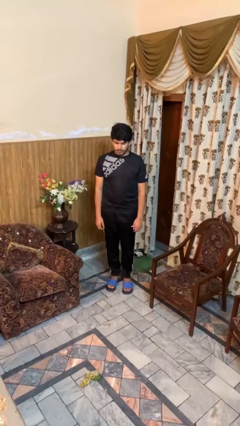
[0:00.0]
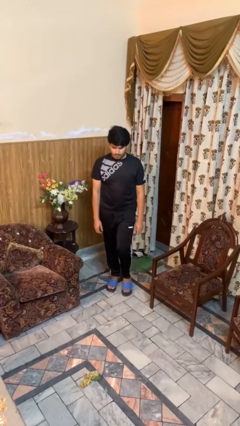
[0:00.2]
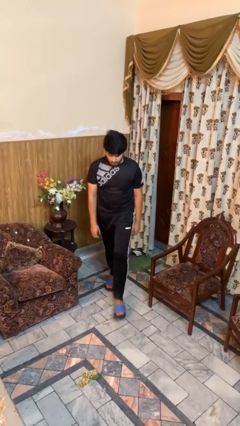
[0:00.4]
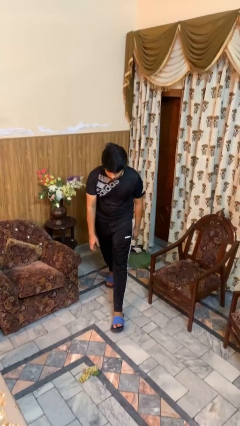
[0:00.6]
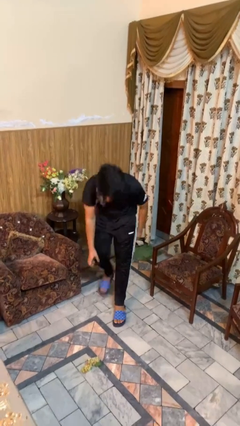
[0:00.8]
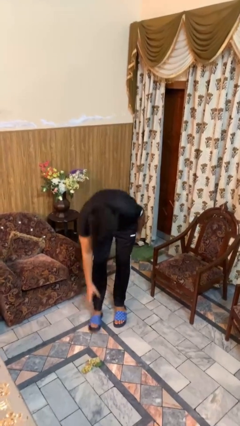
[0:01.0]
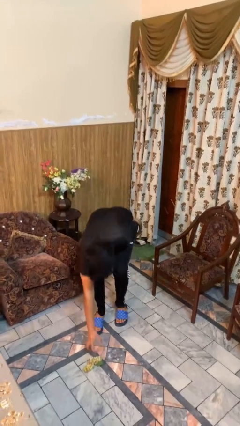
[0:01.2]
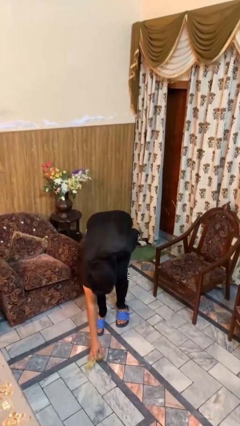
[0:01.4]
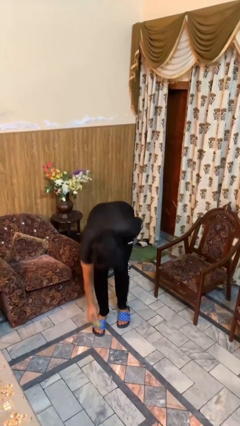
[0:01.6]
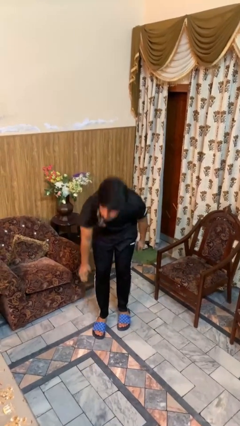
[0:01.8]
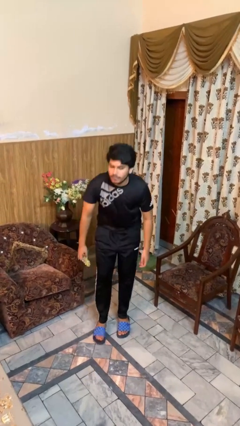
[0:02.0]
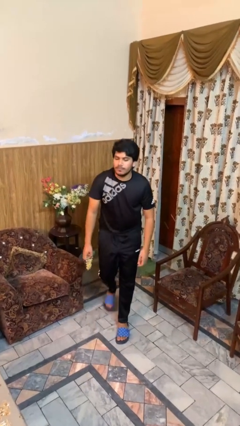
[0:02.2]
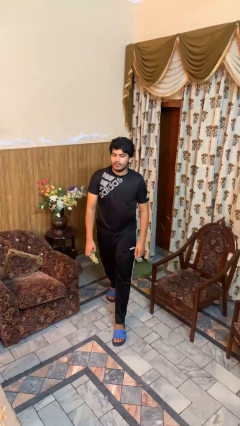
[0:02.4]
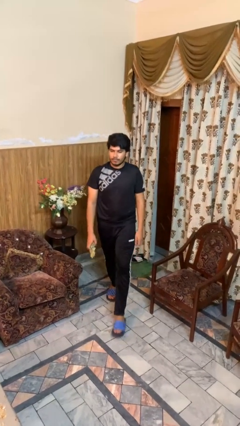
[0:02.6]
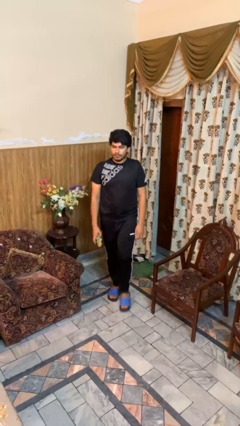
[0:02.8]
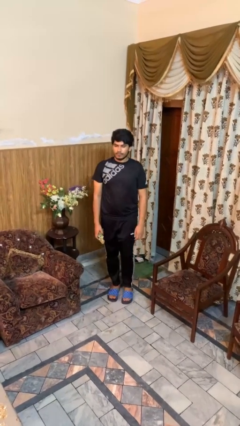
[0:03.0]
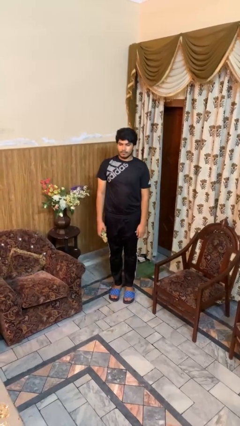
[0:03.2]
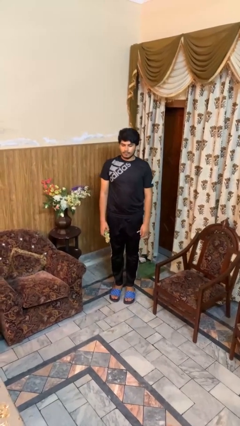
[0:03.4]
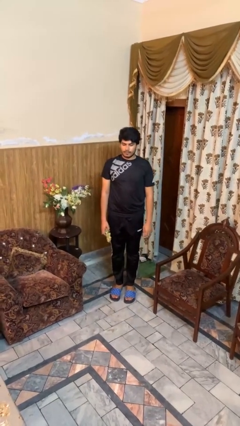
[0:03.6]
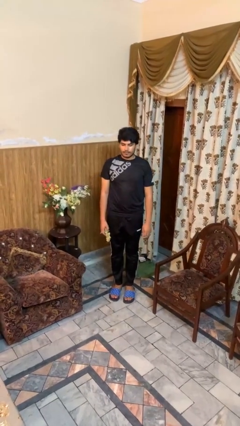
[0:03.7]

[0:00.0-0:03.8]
person picks up object from floor

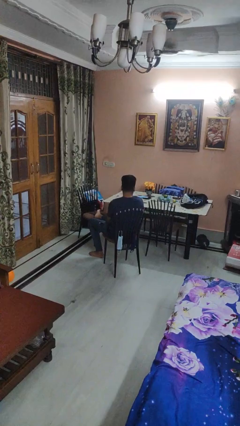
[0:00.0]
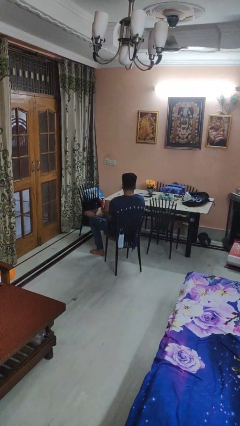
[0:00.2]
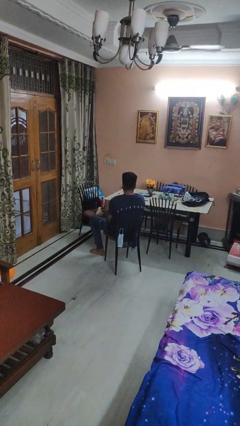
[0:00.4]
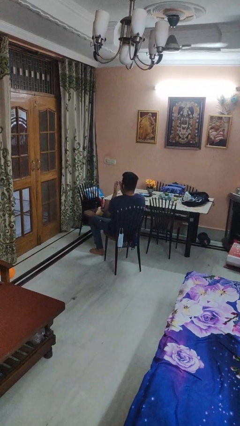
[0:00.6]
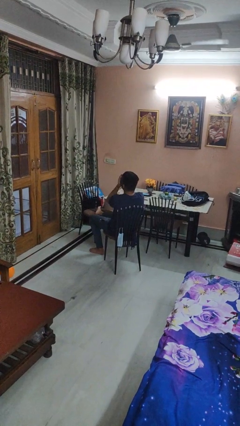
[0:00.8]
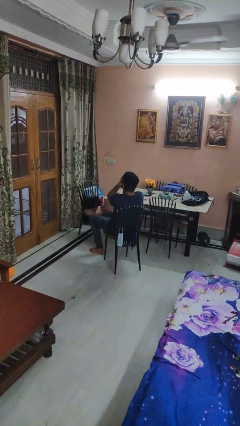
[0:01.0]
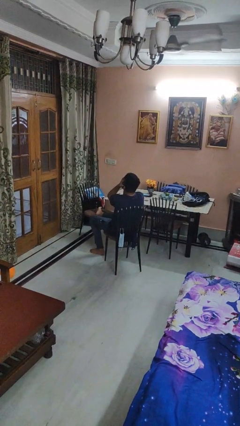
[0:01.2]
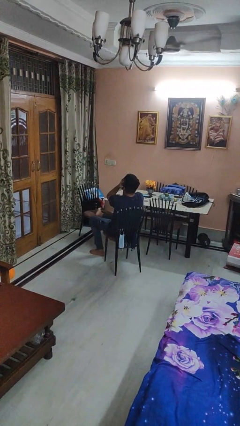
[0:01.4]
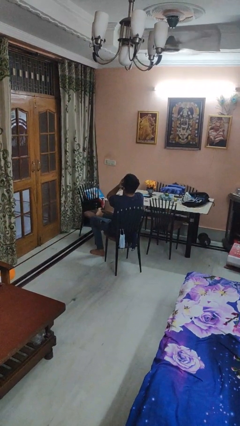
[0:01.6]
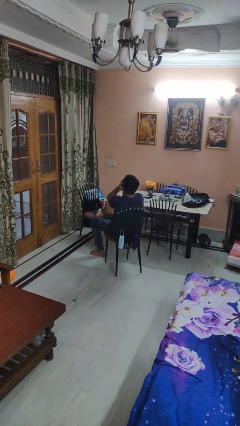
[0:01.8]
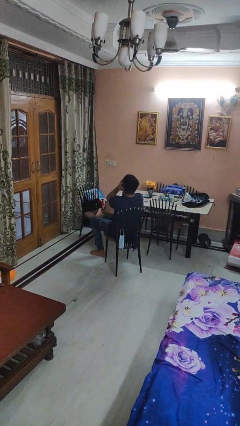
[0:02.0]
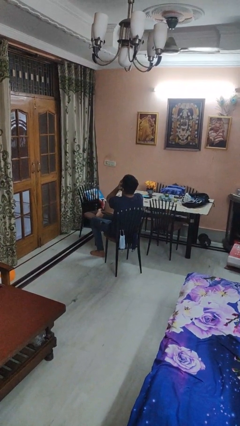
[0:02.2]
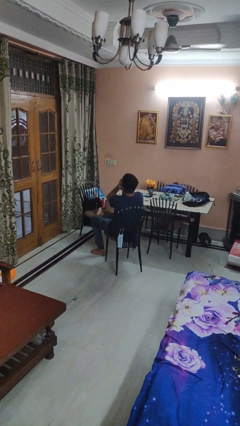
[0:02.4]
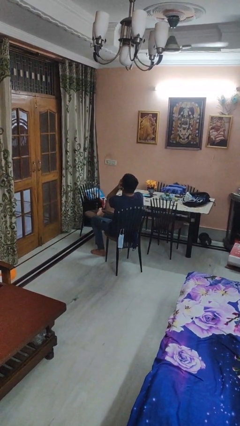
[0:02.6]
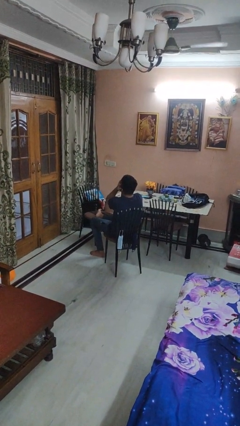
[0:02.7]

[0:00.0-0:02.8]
person covers face with hands

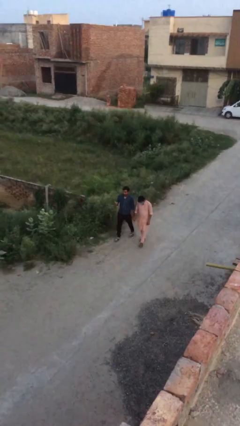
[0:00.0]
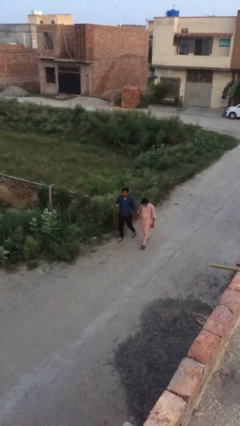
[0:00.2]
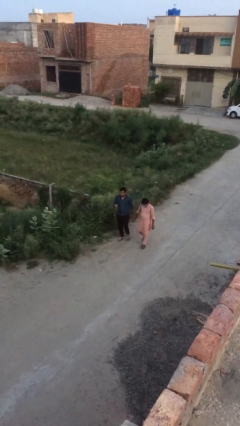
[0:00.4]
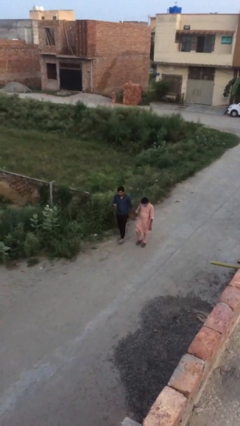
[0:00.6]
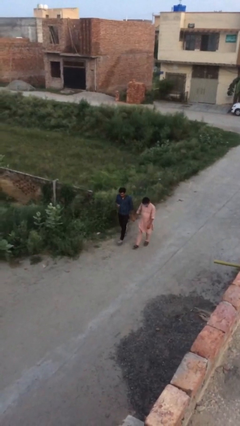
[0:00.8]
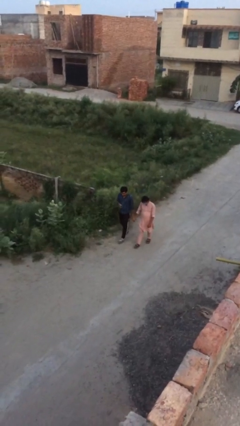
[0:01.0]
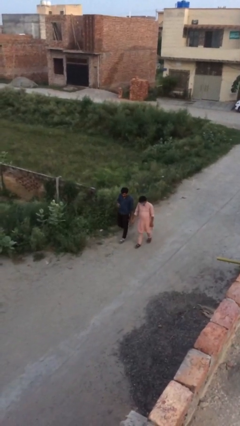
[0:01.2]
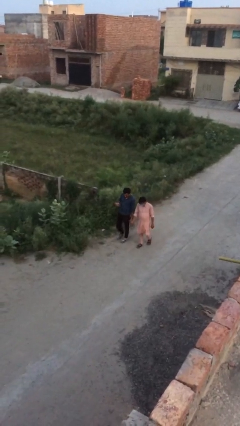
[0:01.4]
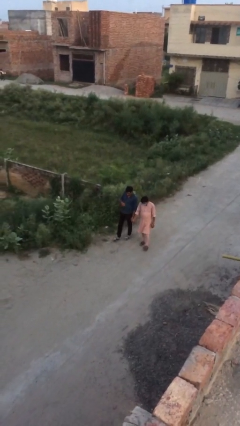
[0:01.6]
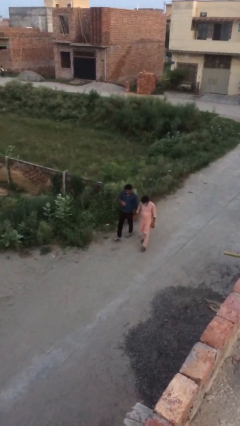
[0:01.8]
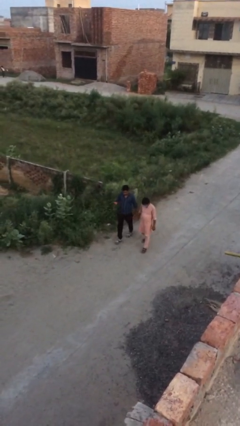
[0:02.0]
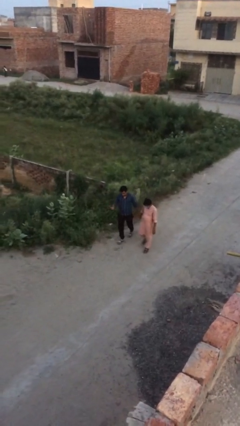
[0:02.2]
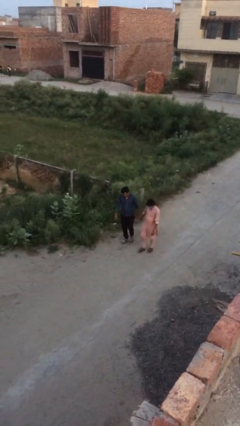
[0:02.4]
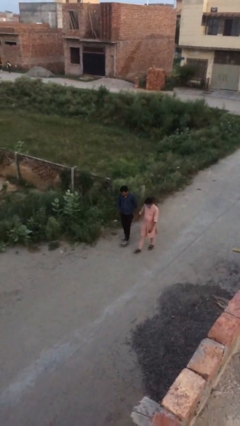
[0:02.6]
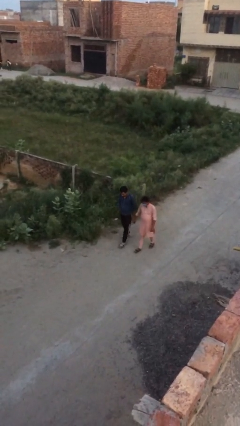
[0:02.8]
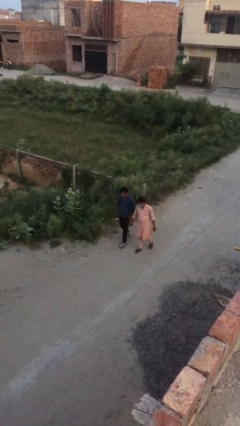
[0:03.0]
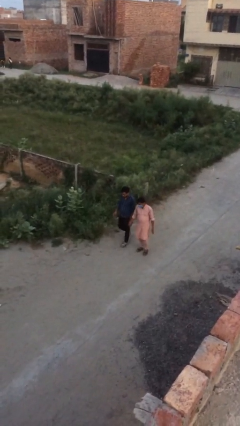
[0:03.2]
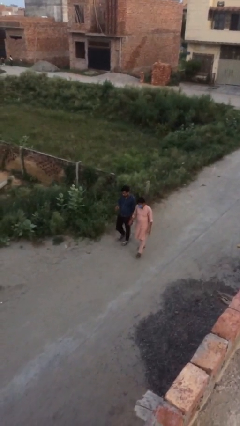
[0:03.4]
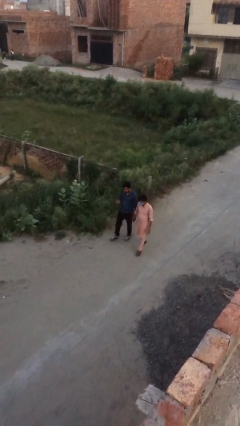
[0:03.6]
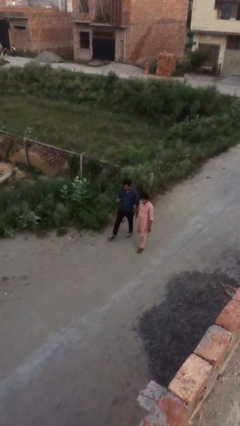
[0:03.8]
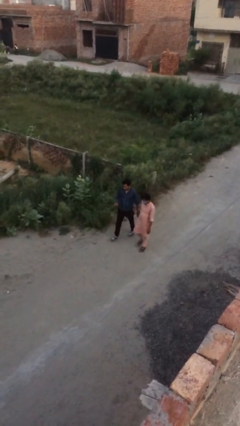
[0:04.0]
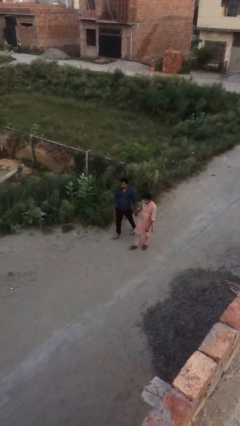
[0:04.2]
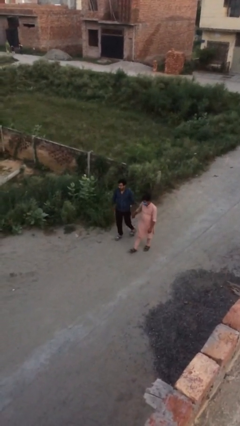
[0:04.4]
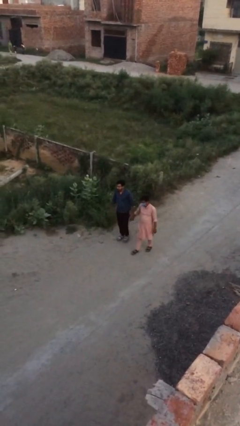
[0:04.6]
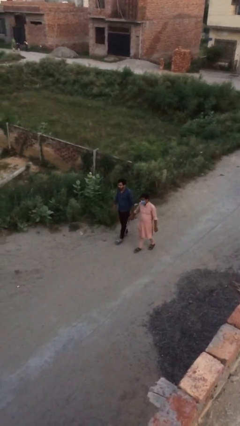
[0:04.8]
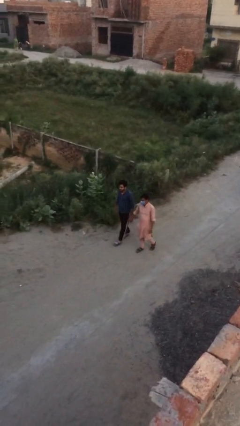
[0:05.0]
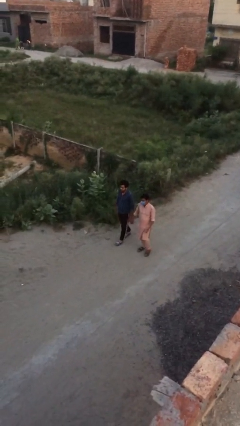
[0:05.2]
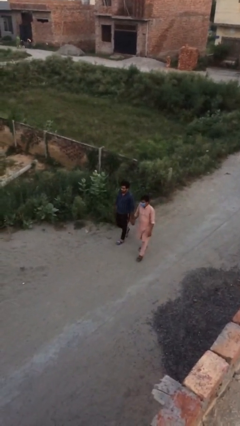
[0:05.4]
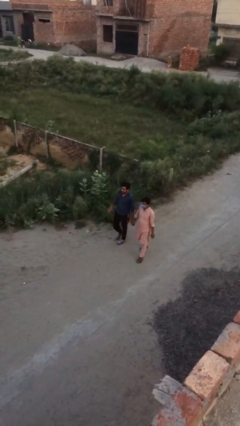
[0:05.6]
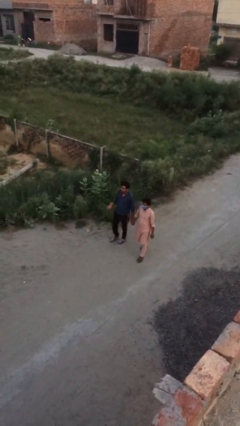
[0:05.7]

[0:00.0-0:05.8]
person holds hand

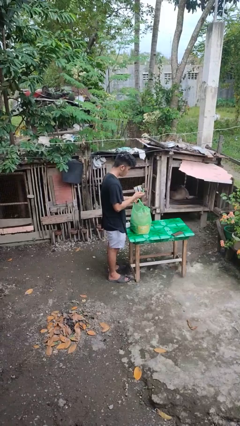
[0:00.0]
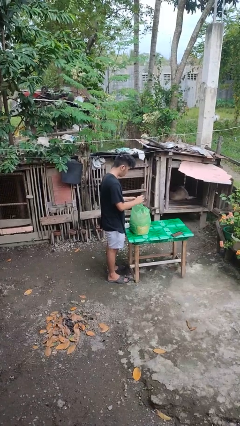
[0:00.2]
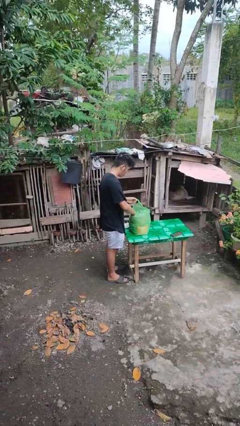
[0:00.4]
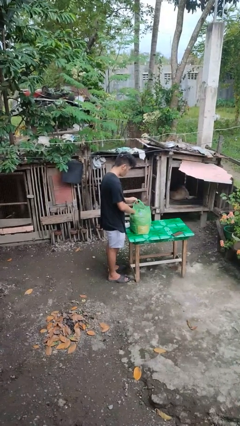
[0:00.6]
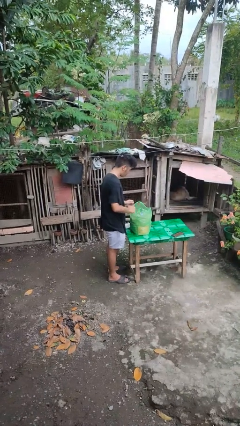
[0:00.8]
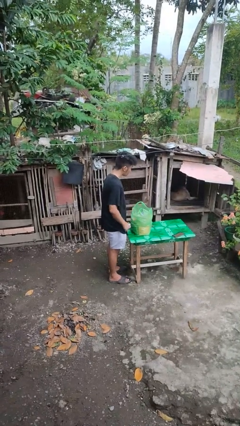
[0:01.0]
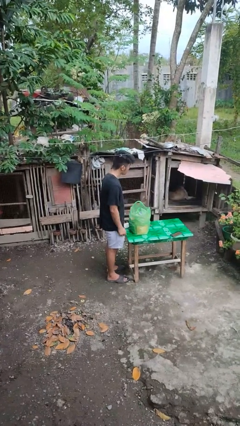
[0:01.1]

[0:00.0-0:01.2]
person puts object into bag

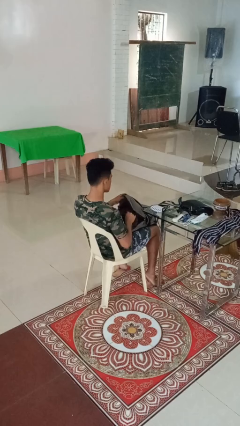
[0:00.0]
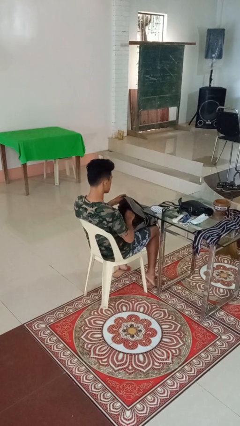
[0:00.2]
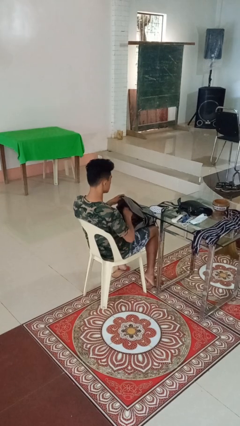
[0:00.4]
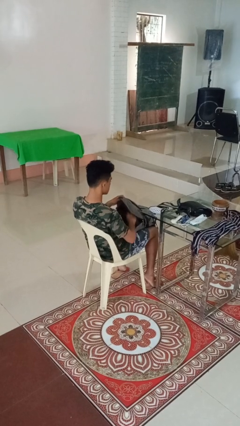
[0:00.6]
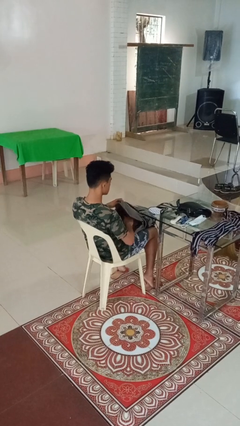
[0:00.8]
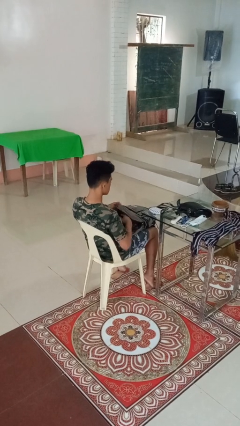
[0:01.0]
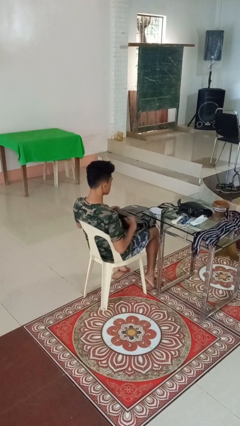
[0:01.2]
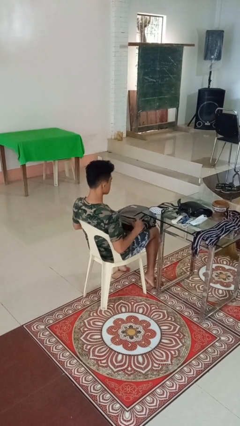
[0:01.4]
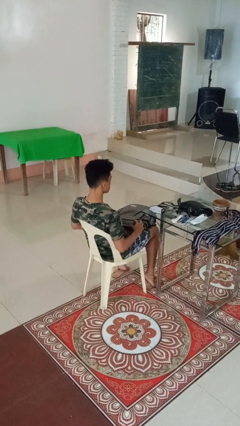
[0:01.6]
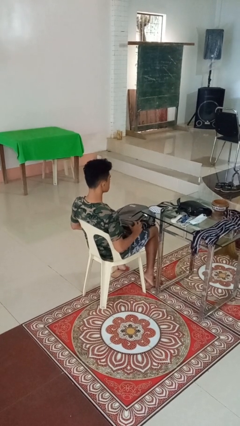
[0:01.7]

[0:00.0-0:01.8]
person puts object into backpack

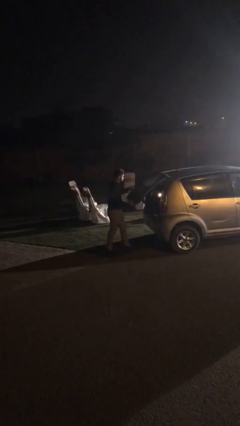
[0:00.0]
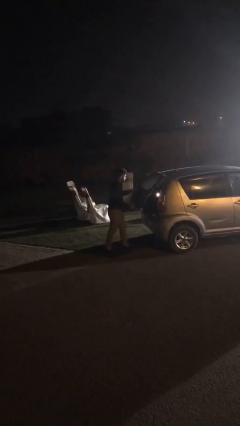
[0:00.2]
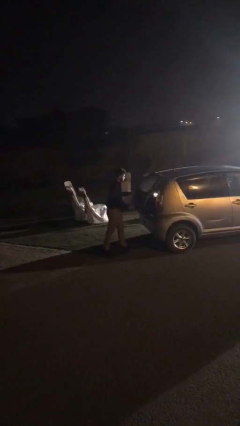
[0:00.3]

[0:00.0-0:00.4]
person closes car trunk

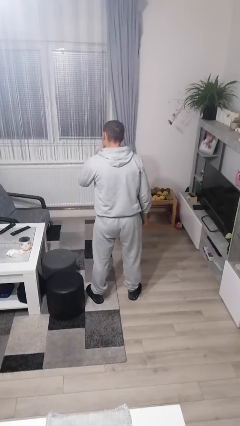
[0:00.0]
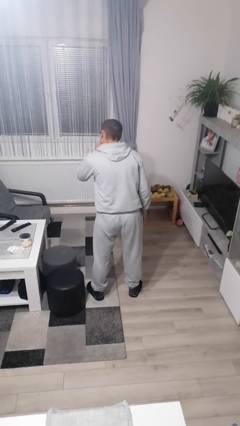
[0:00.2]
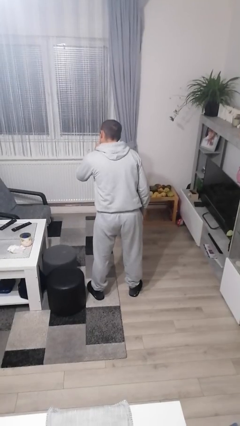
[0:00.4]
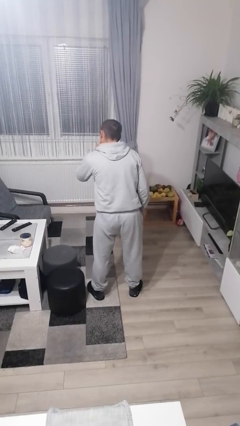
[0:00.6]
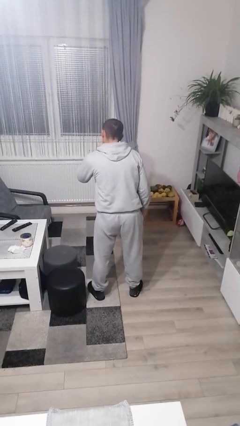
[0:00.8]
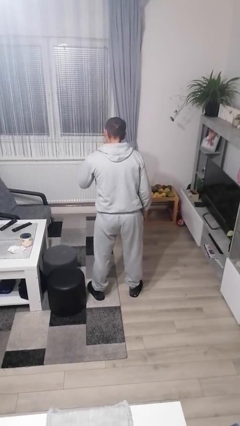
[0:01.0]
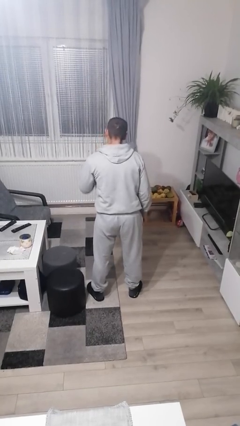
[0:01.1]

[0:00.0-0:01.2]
person gestures be quiet
